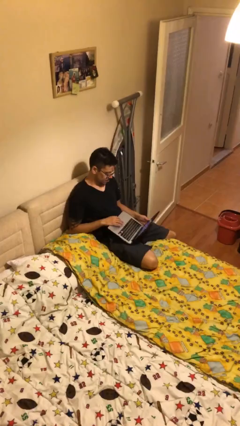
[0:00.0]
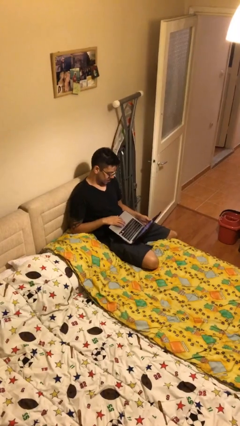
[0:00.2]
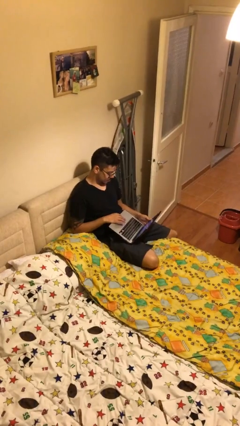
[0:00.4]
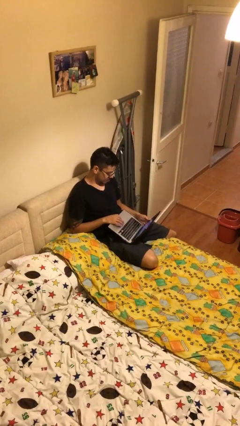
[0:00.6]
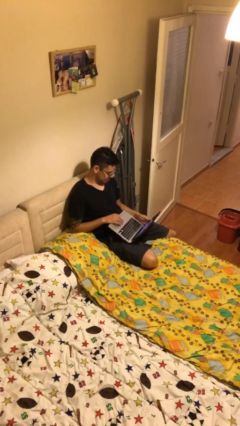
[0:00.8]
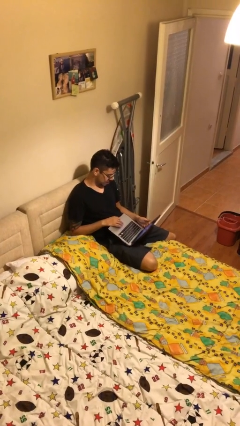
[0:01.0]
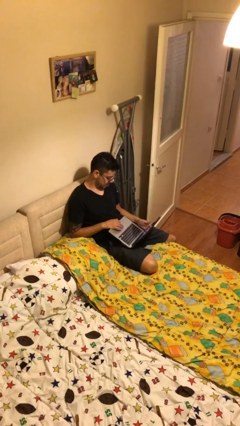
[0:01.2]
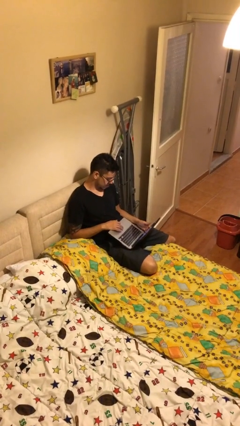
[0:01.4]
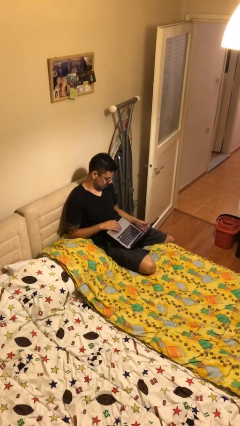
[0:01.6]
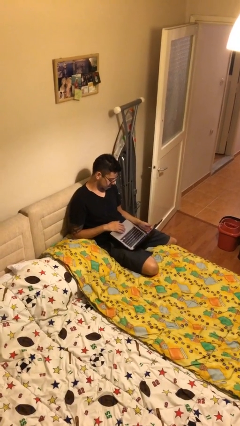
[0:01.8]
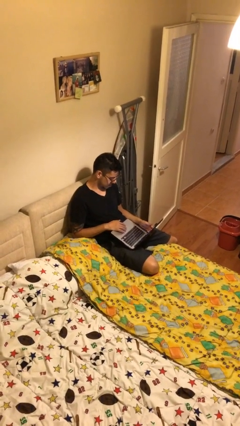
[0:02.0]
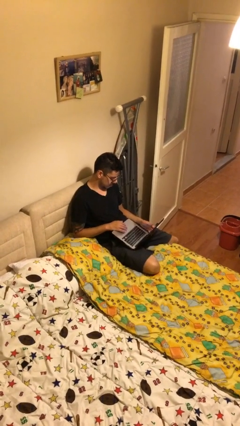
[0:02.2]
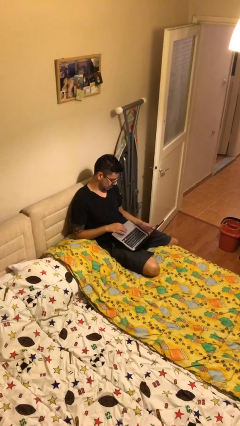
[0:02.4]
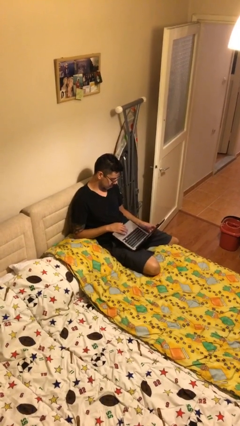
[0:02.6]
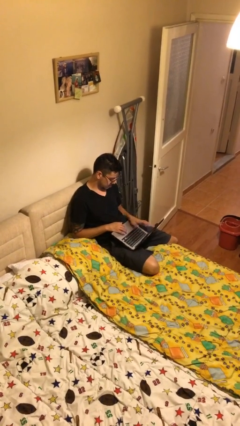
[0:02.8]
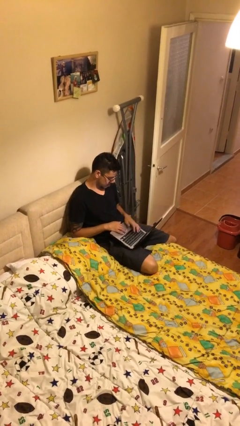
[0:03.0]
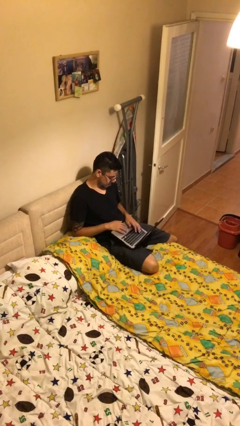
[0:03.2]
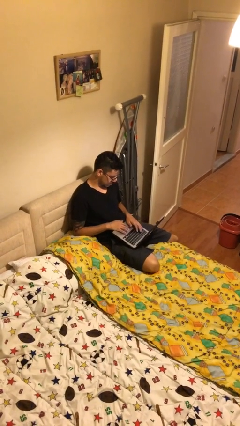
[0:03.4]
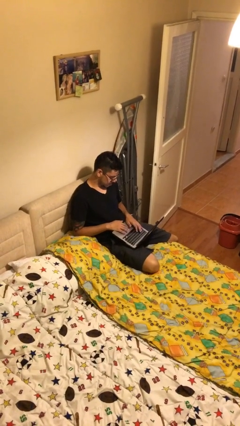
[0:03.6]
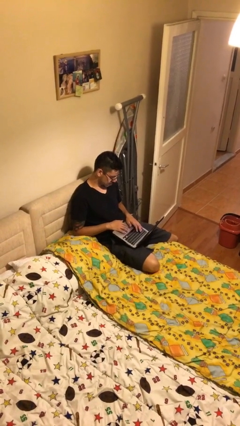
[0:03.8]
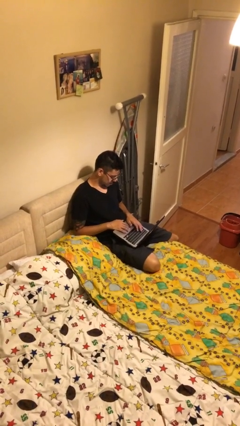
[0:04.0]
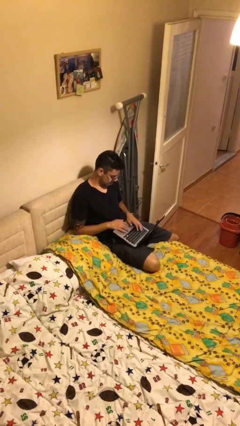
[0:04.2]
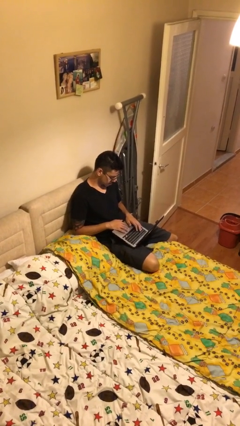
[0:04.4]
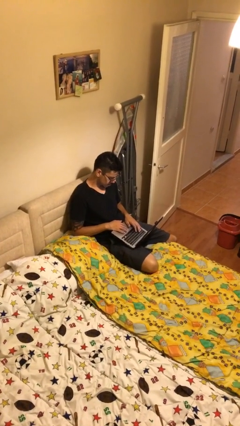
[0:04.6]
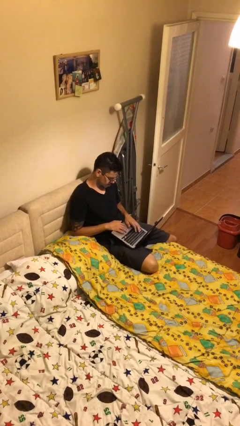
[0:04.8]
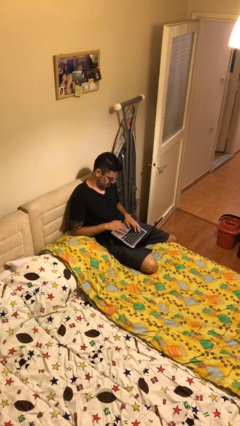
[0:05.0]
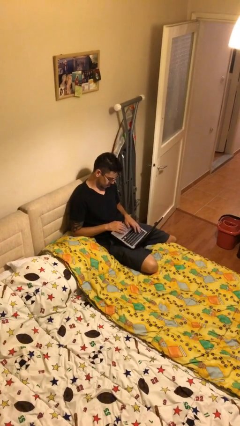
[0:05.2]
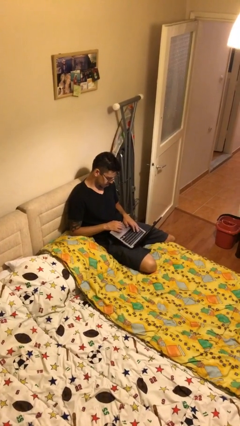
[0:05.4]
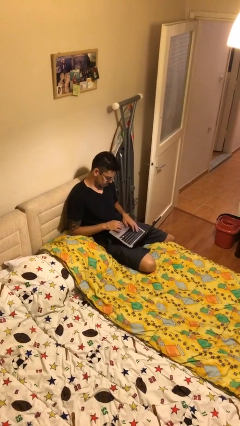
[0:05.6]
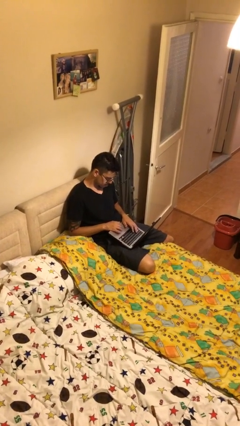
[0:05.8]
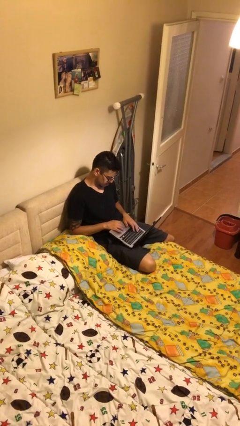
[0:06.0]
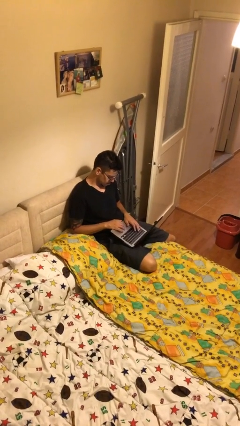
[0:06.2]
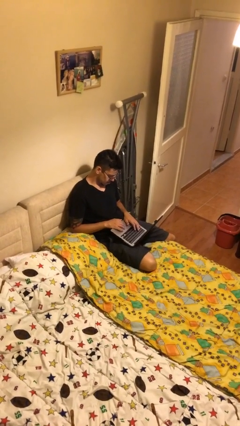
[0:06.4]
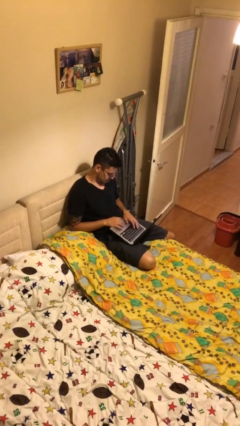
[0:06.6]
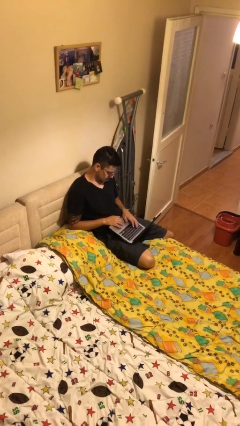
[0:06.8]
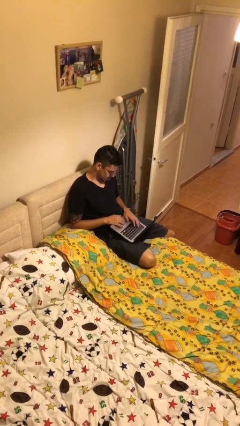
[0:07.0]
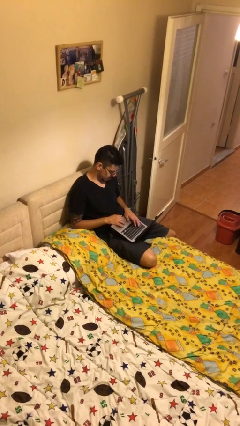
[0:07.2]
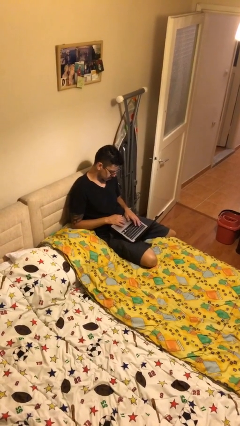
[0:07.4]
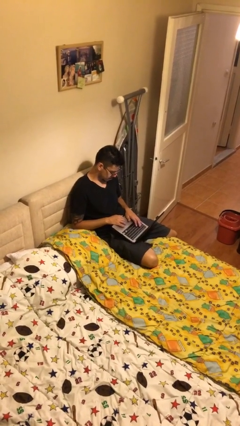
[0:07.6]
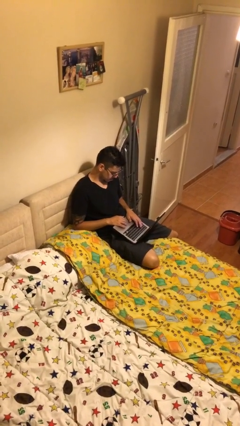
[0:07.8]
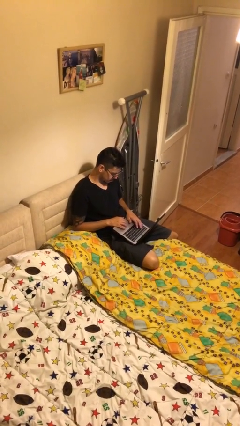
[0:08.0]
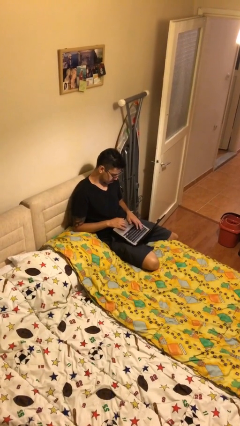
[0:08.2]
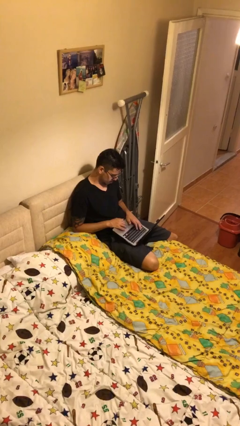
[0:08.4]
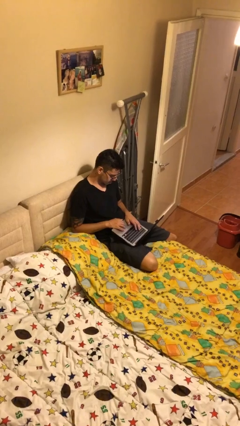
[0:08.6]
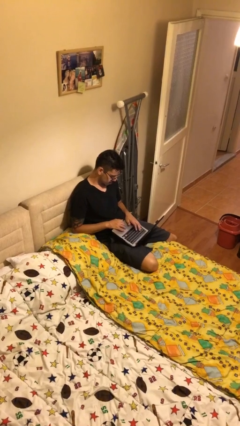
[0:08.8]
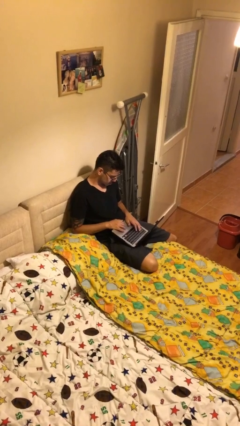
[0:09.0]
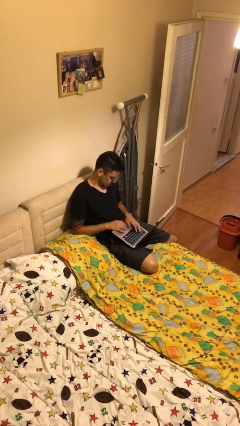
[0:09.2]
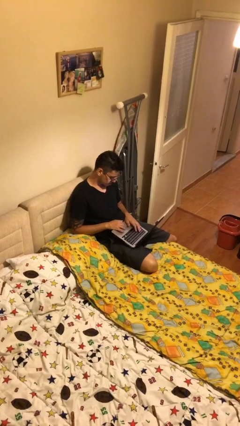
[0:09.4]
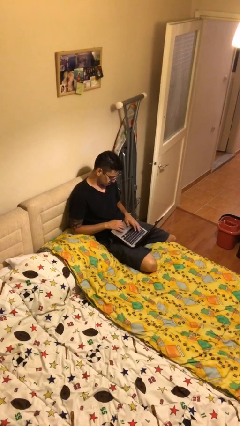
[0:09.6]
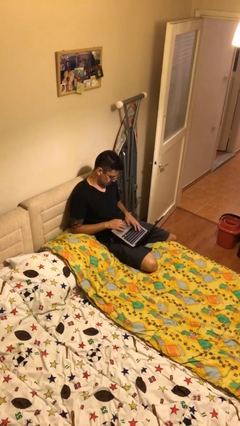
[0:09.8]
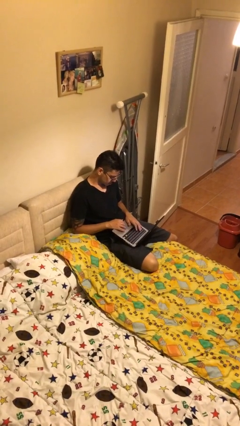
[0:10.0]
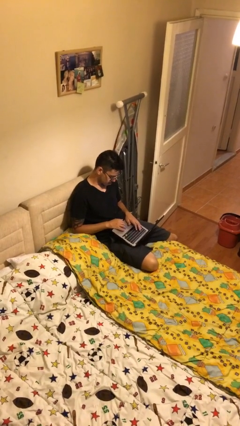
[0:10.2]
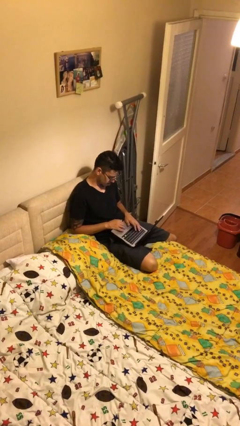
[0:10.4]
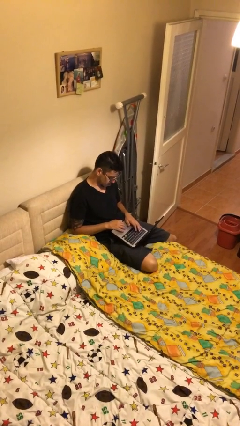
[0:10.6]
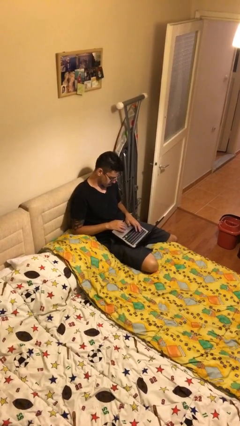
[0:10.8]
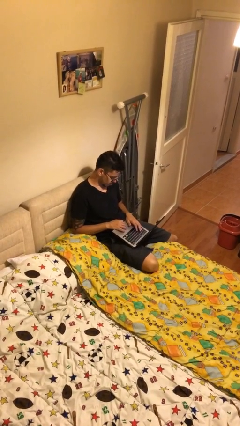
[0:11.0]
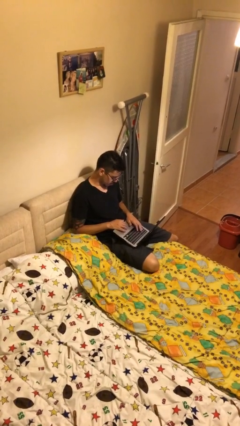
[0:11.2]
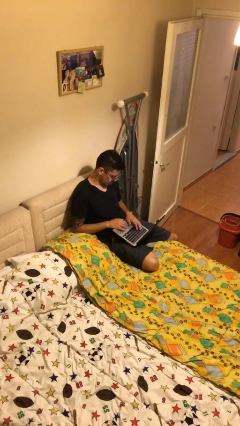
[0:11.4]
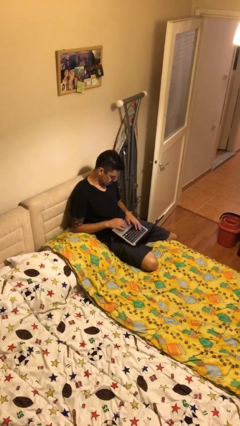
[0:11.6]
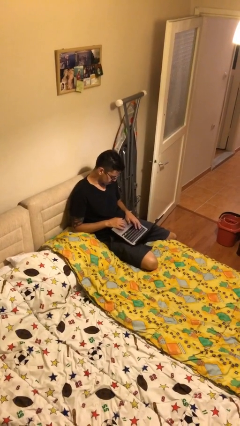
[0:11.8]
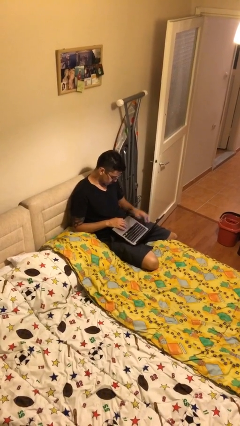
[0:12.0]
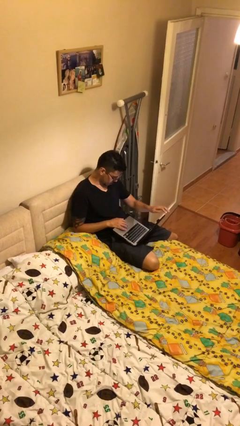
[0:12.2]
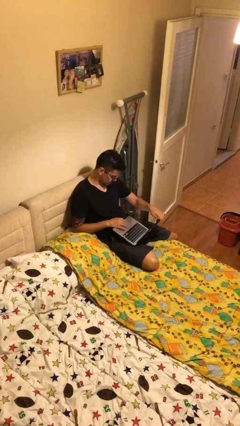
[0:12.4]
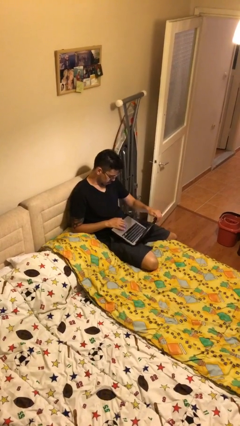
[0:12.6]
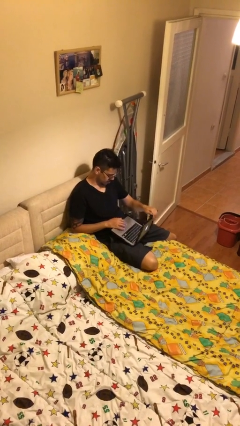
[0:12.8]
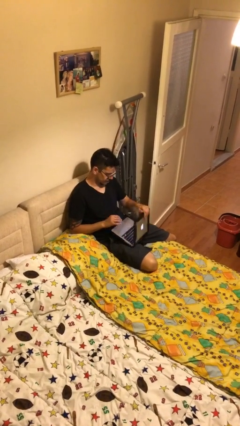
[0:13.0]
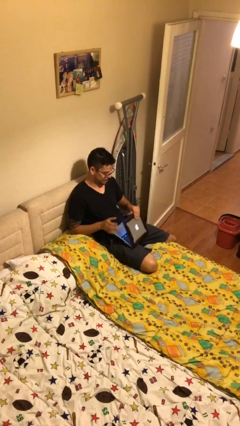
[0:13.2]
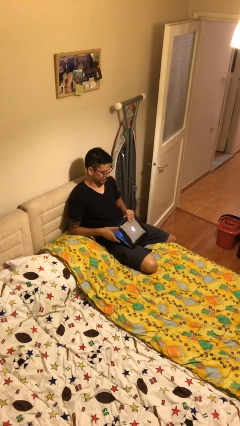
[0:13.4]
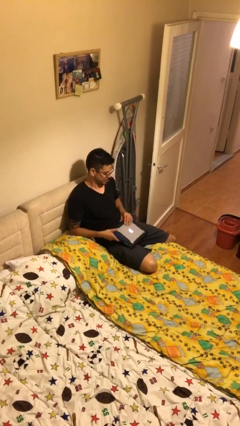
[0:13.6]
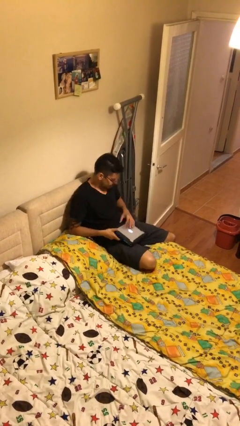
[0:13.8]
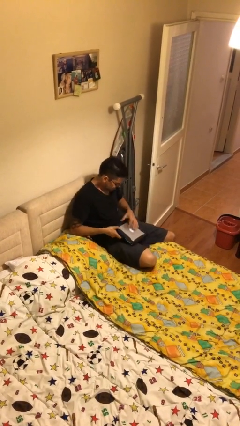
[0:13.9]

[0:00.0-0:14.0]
person interacts with laptop

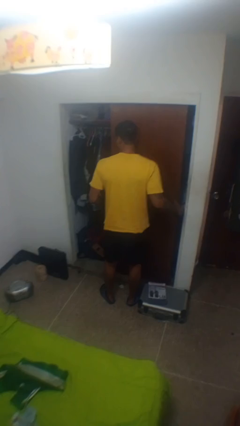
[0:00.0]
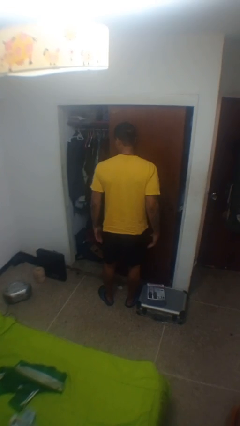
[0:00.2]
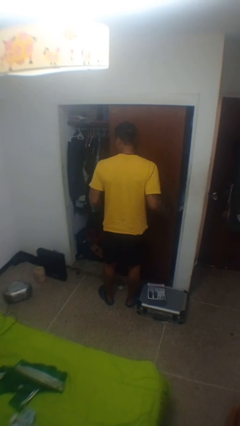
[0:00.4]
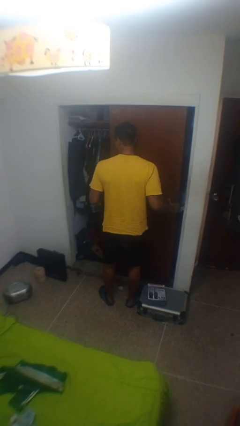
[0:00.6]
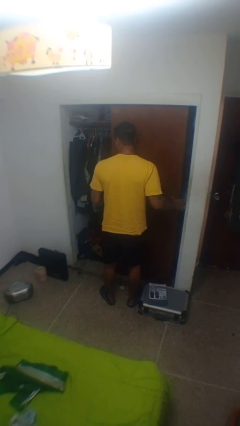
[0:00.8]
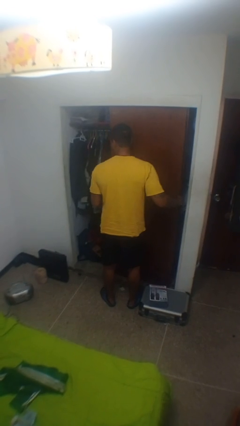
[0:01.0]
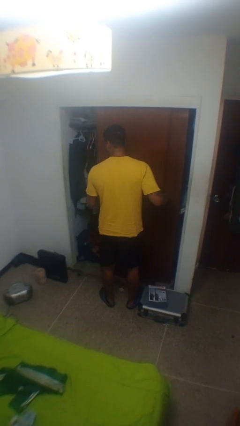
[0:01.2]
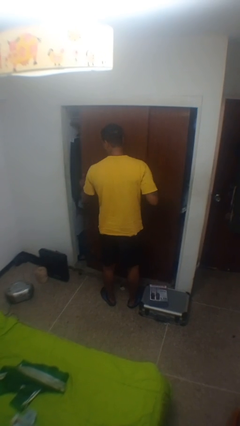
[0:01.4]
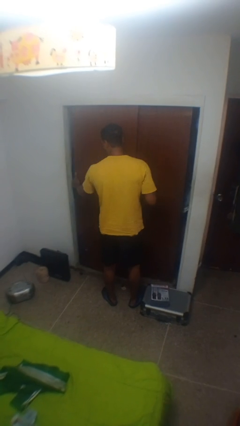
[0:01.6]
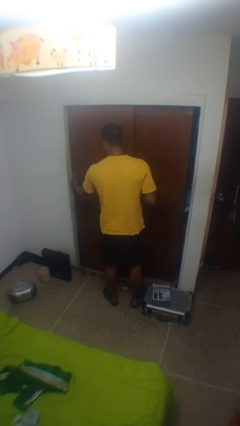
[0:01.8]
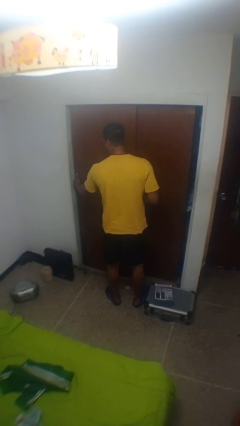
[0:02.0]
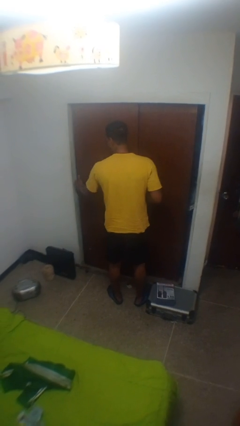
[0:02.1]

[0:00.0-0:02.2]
person closes closet door

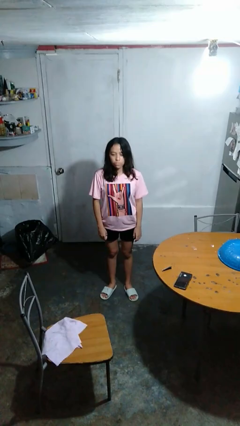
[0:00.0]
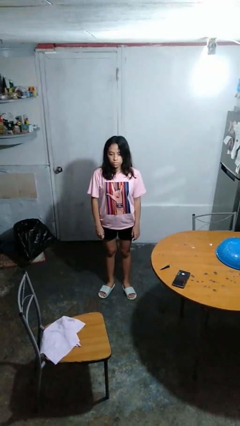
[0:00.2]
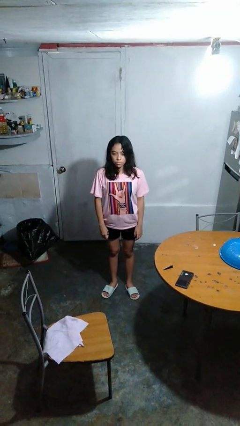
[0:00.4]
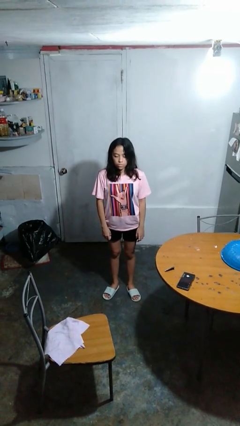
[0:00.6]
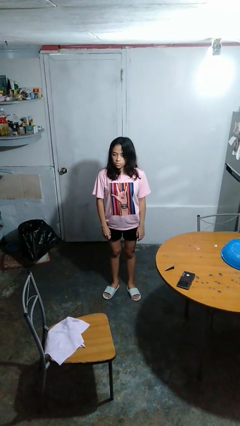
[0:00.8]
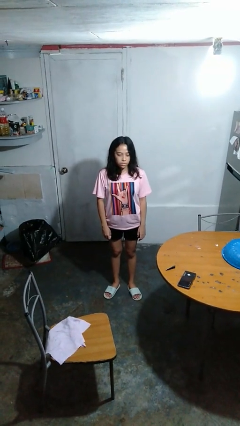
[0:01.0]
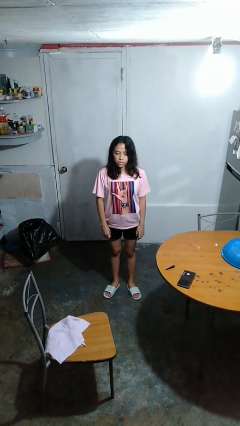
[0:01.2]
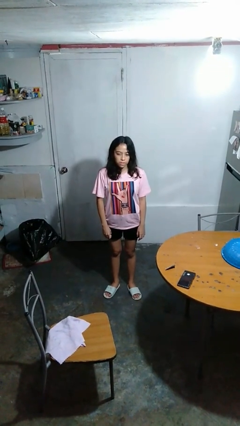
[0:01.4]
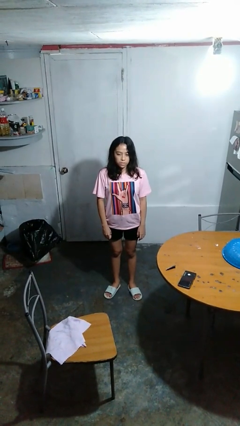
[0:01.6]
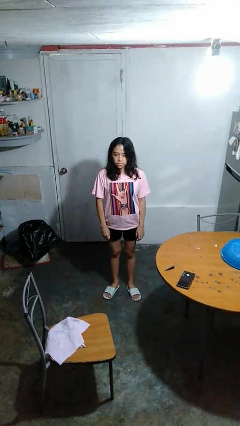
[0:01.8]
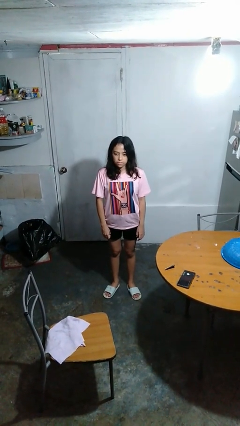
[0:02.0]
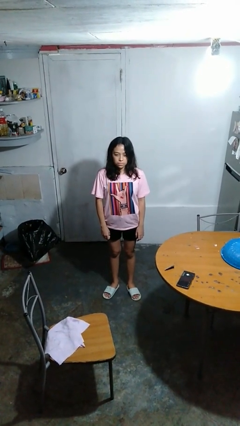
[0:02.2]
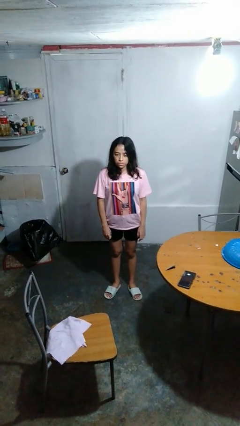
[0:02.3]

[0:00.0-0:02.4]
person shakes head
